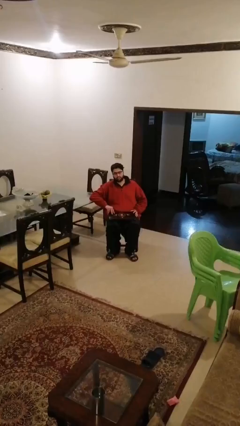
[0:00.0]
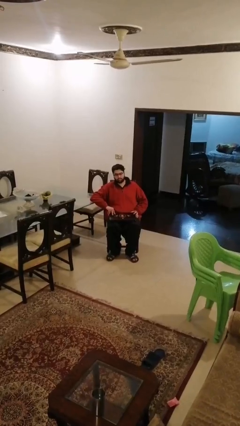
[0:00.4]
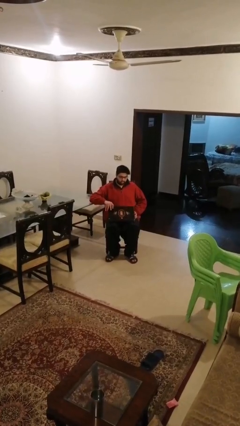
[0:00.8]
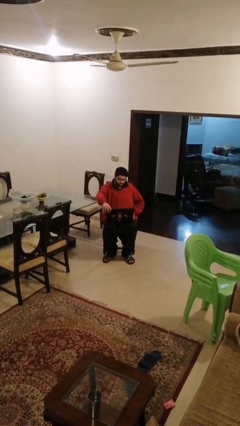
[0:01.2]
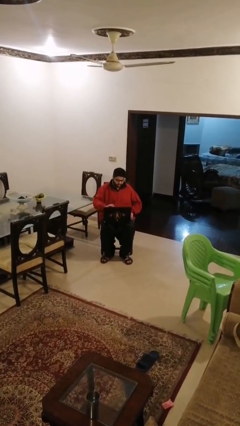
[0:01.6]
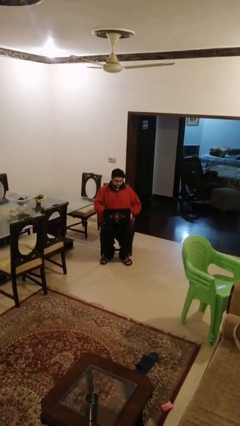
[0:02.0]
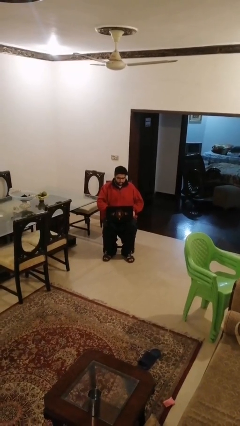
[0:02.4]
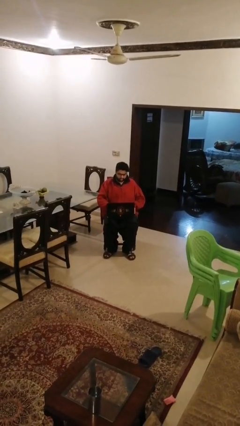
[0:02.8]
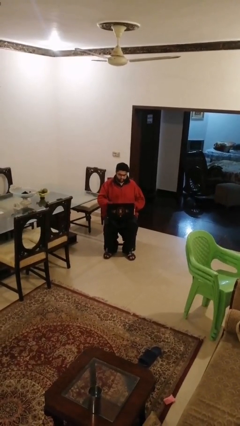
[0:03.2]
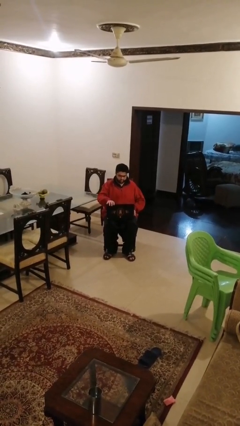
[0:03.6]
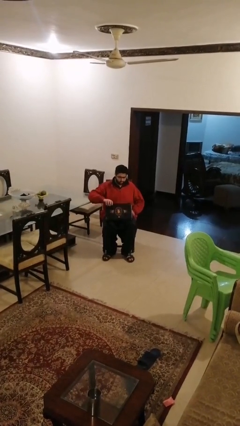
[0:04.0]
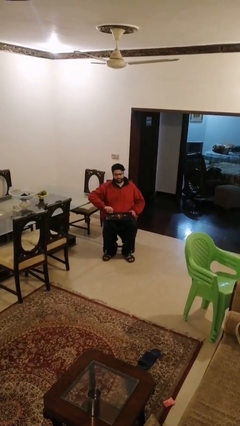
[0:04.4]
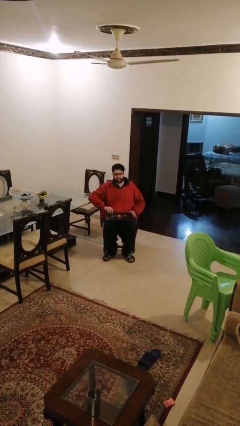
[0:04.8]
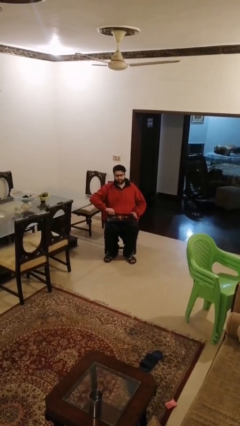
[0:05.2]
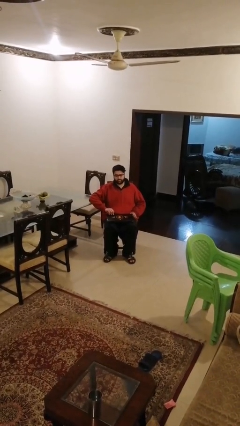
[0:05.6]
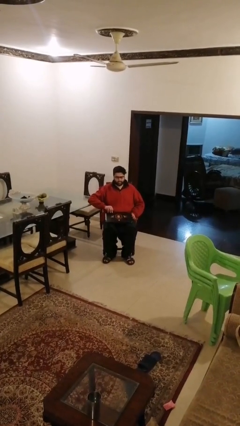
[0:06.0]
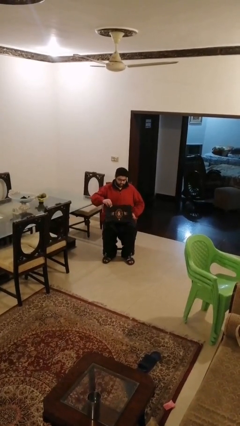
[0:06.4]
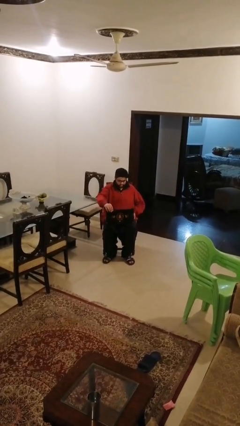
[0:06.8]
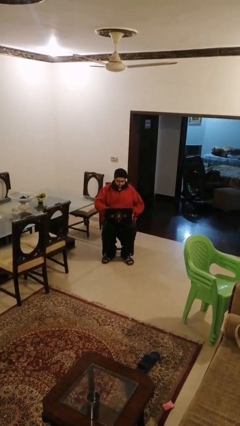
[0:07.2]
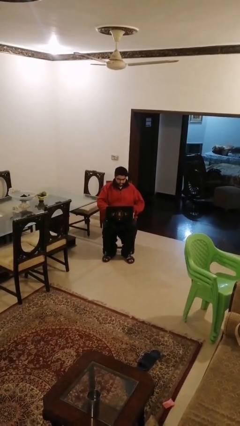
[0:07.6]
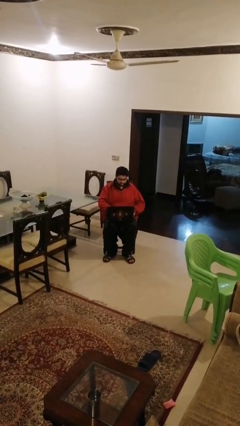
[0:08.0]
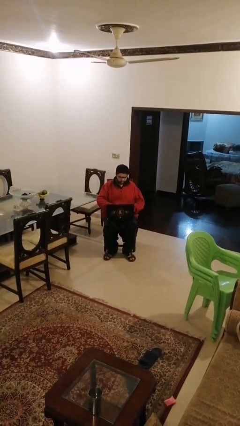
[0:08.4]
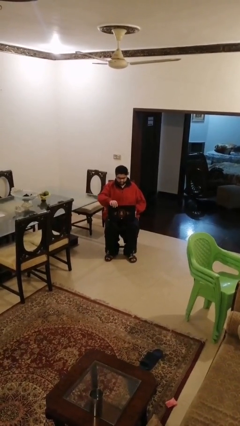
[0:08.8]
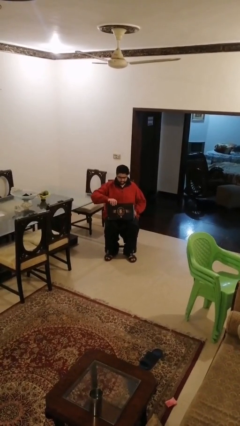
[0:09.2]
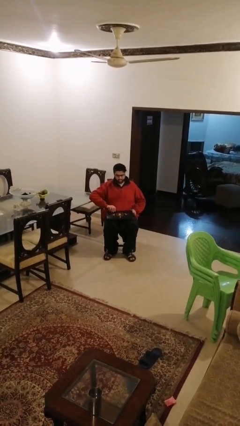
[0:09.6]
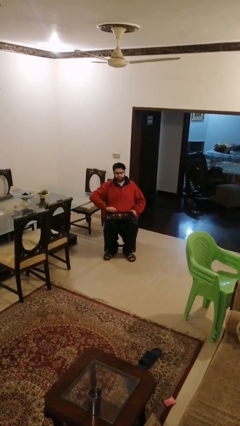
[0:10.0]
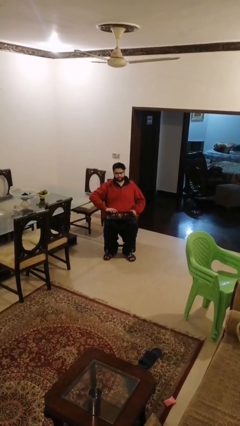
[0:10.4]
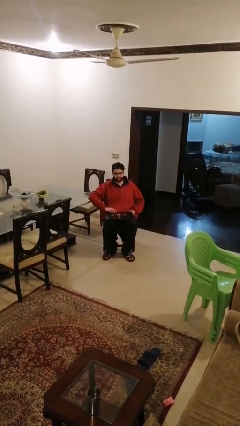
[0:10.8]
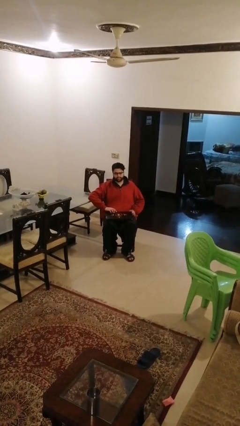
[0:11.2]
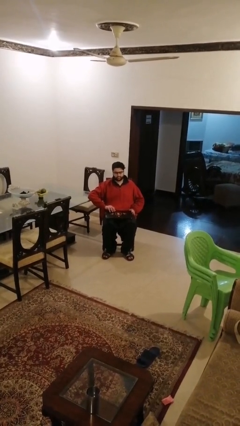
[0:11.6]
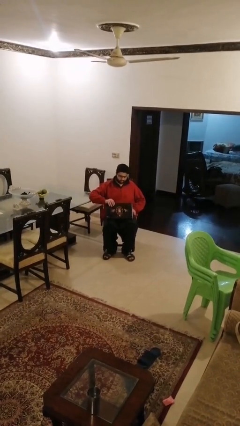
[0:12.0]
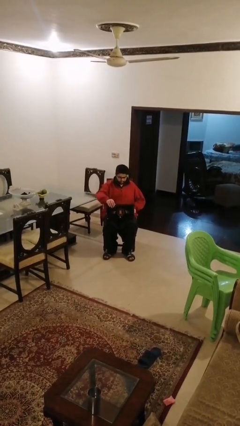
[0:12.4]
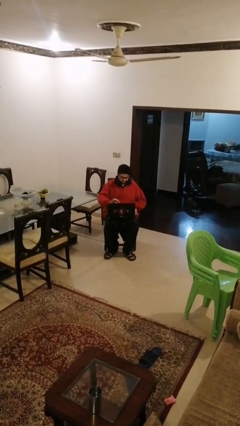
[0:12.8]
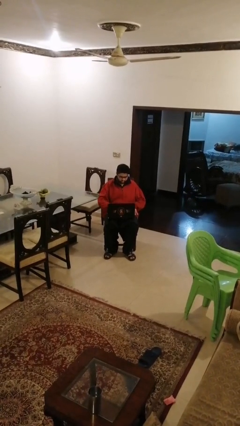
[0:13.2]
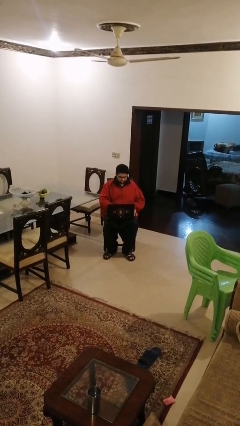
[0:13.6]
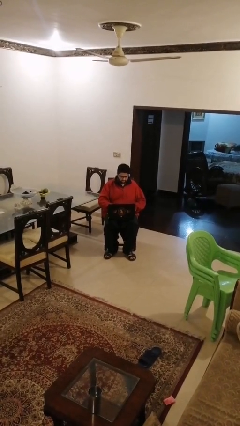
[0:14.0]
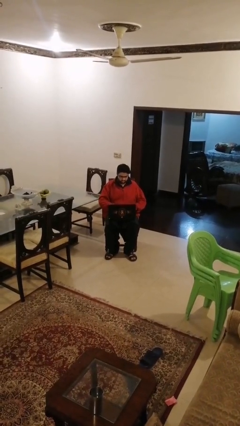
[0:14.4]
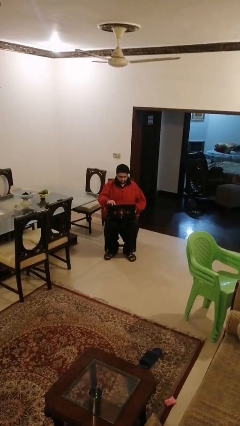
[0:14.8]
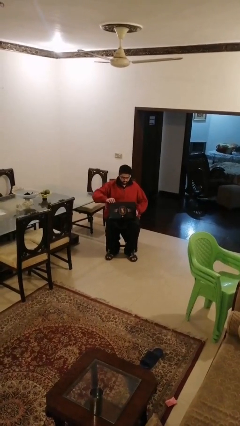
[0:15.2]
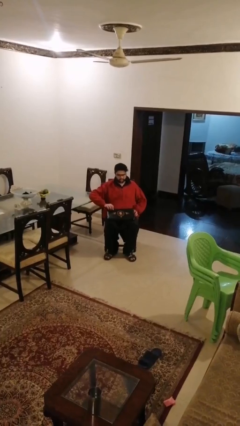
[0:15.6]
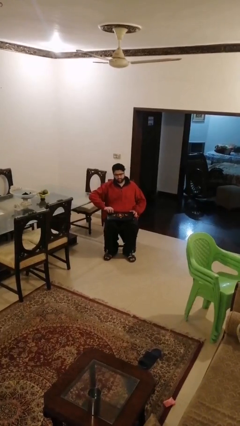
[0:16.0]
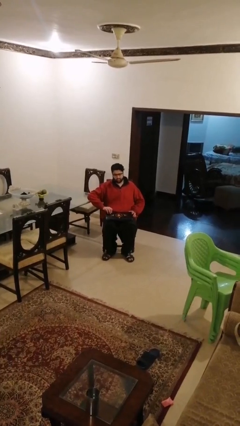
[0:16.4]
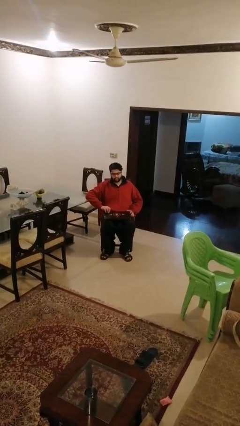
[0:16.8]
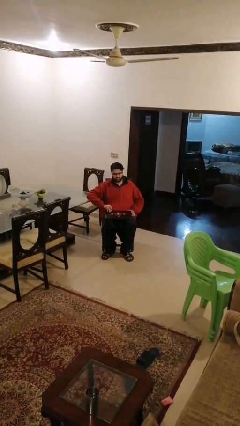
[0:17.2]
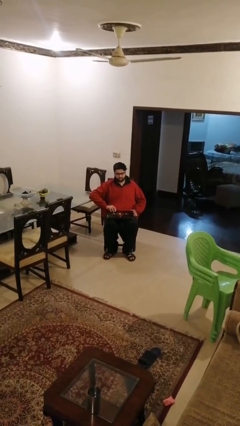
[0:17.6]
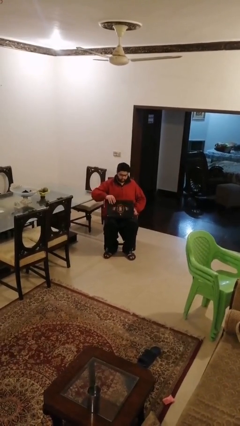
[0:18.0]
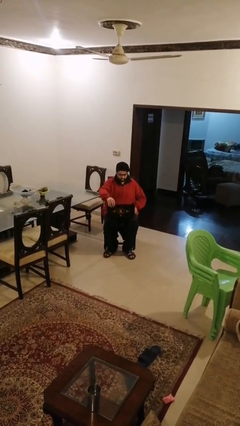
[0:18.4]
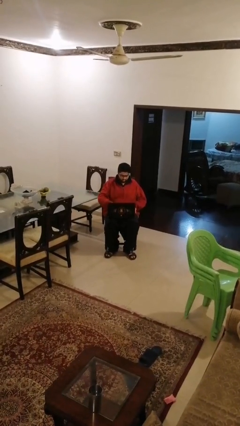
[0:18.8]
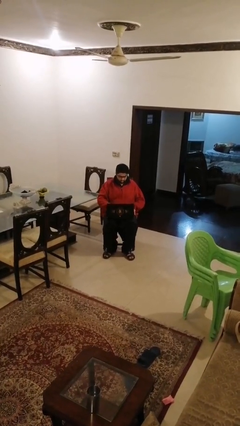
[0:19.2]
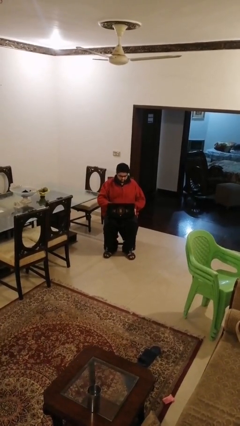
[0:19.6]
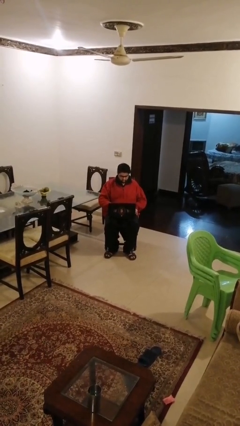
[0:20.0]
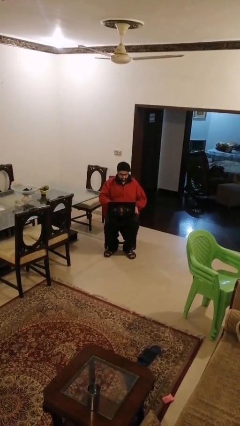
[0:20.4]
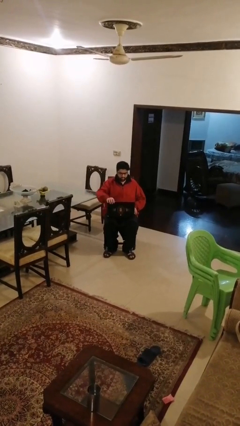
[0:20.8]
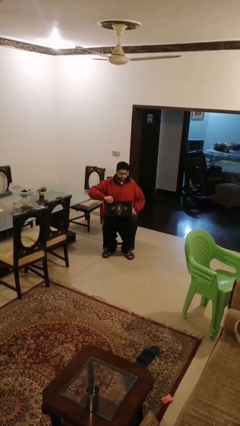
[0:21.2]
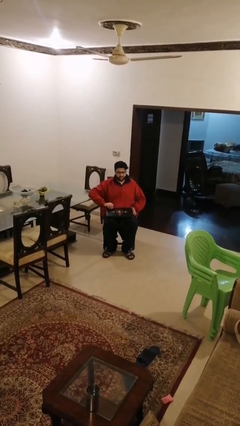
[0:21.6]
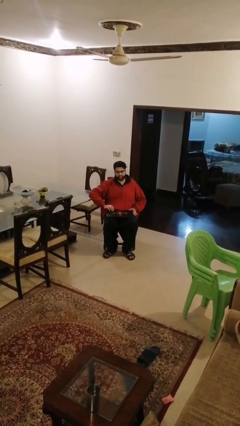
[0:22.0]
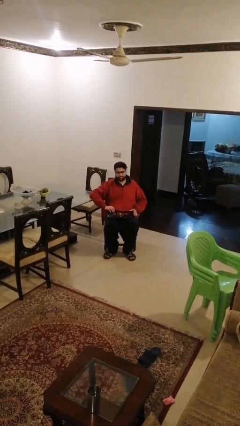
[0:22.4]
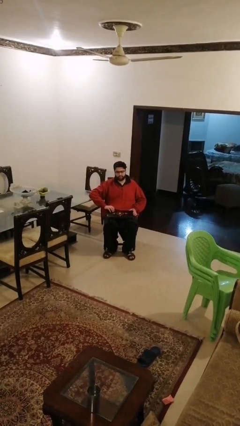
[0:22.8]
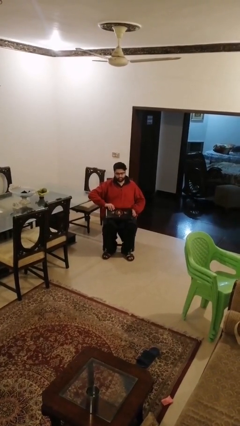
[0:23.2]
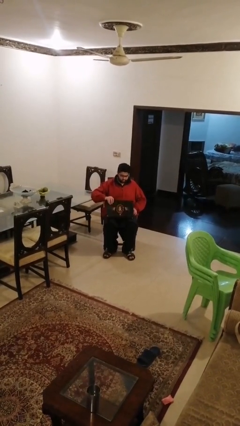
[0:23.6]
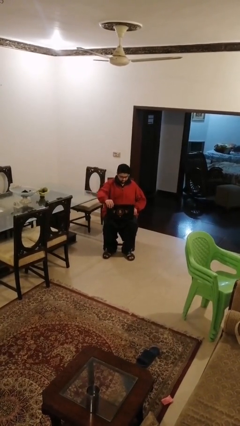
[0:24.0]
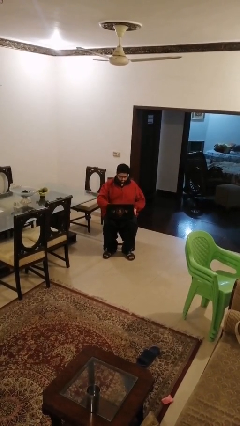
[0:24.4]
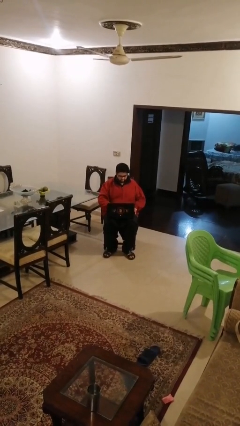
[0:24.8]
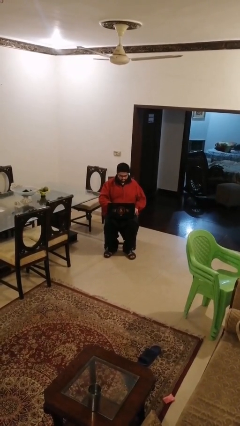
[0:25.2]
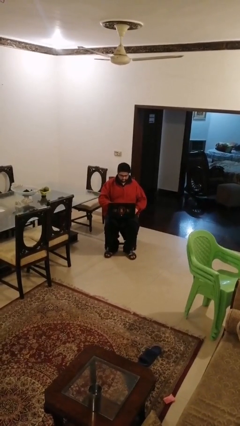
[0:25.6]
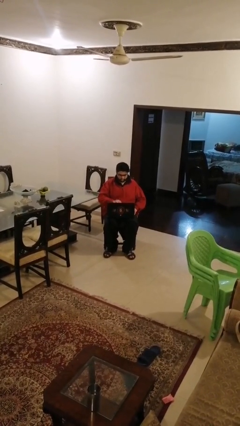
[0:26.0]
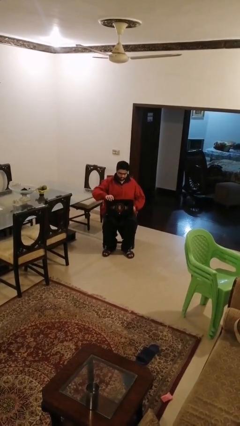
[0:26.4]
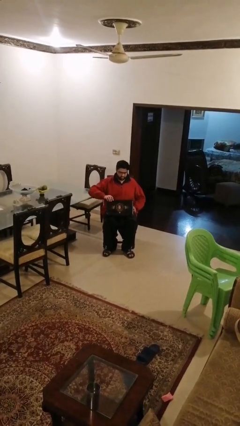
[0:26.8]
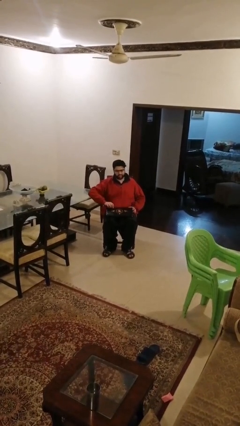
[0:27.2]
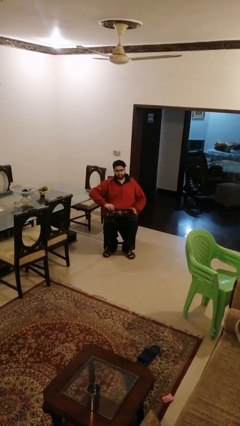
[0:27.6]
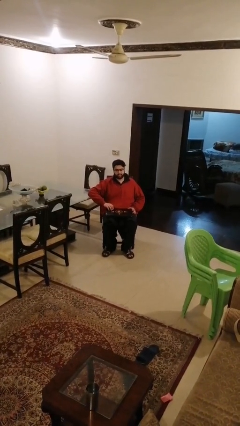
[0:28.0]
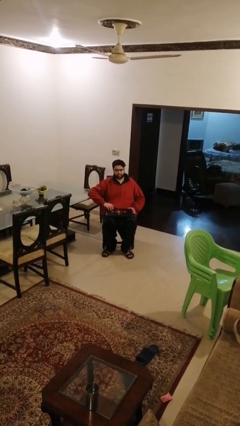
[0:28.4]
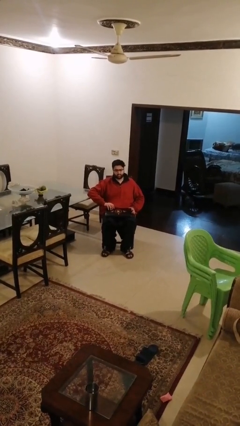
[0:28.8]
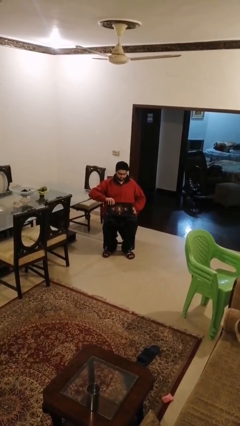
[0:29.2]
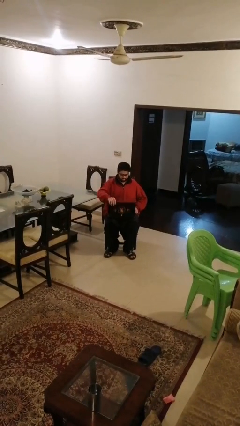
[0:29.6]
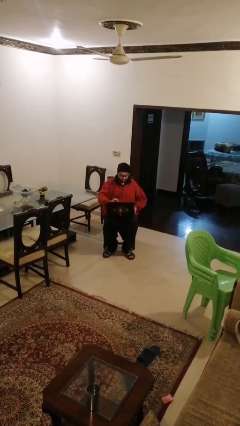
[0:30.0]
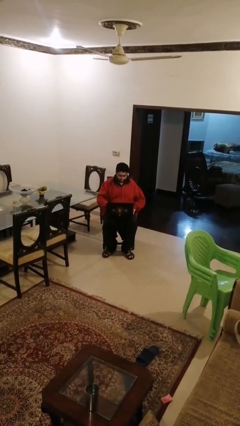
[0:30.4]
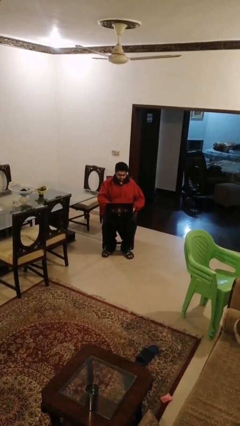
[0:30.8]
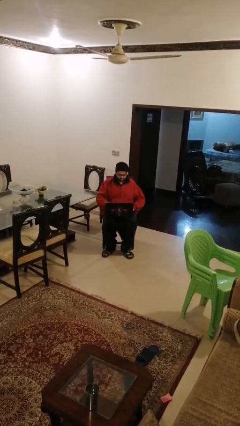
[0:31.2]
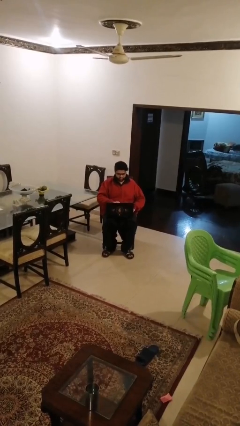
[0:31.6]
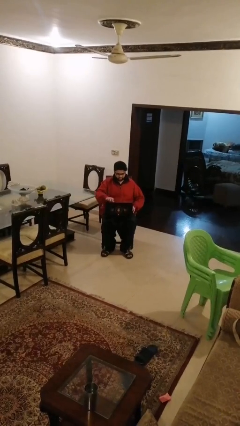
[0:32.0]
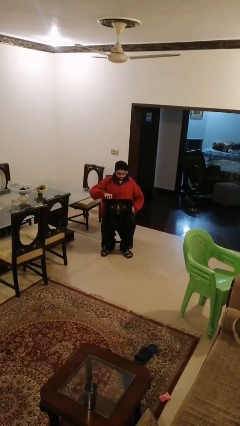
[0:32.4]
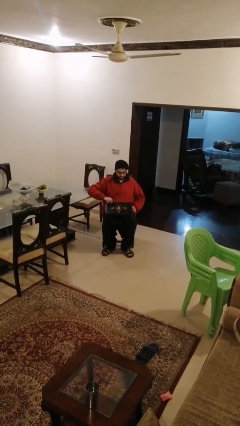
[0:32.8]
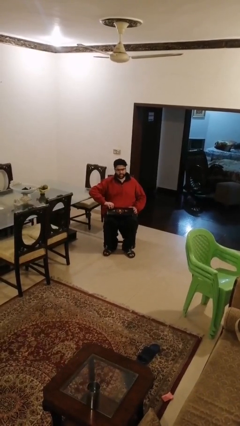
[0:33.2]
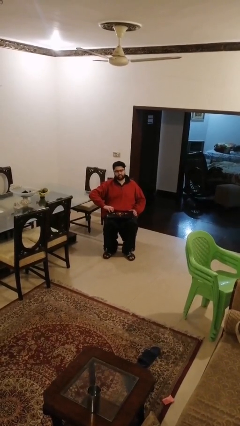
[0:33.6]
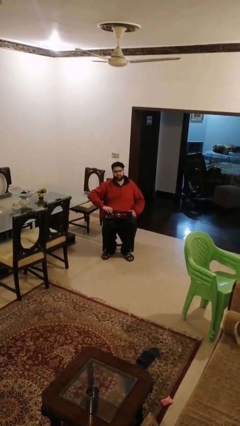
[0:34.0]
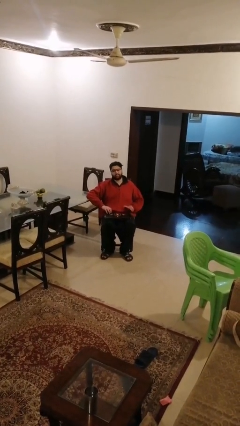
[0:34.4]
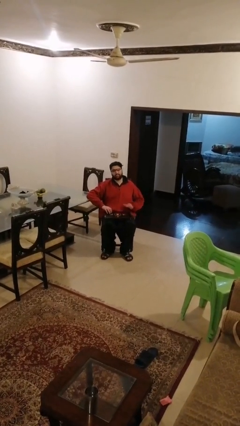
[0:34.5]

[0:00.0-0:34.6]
person interacts with laptop

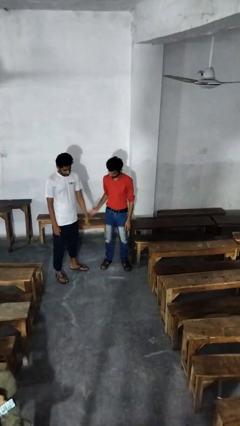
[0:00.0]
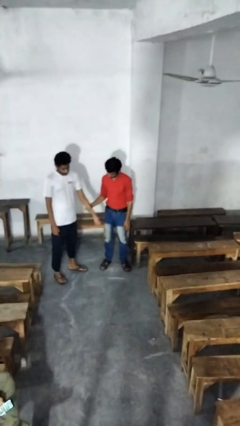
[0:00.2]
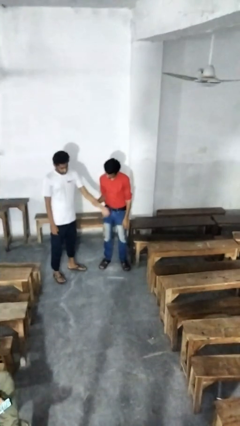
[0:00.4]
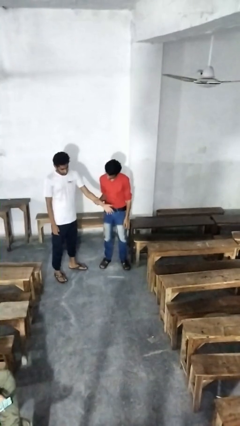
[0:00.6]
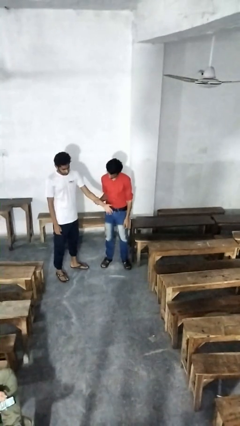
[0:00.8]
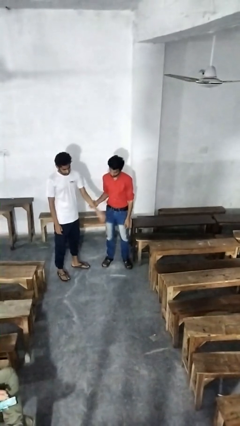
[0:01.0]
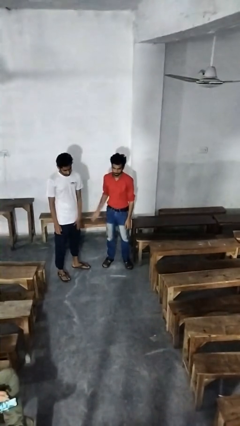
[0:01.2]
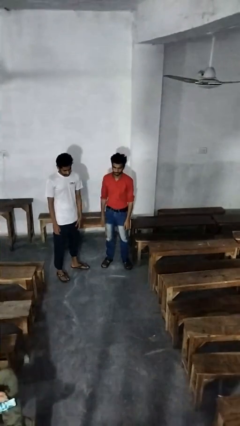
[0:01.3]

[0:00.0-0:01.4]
person grabs person by forearm
